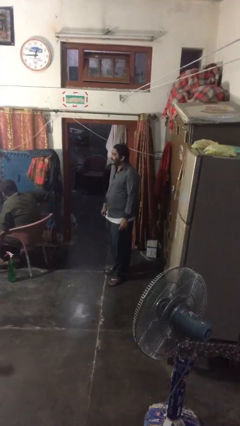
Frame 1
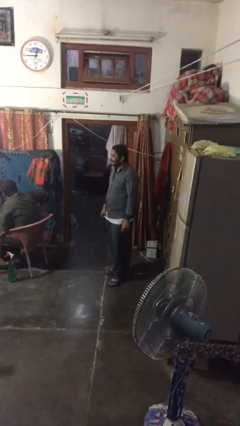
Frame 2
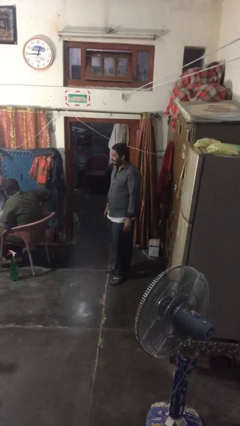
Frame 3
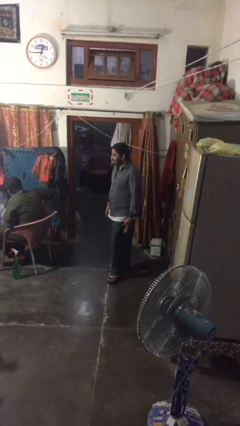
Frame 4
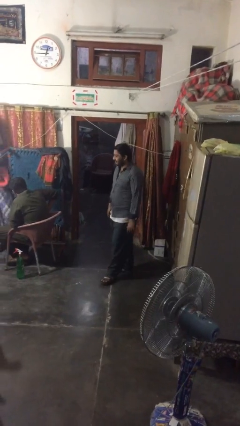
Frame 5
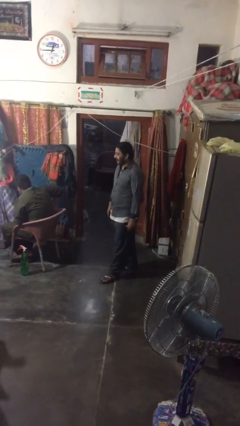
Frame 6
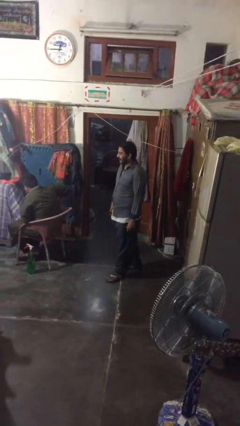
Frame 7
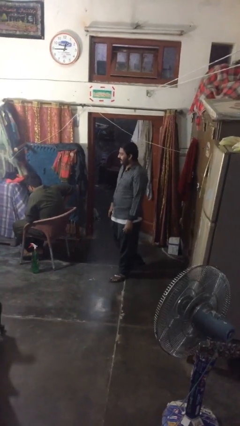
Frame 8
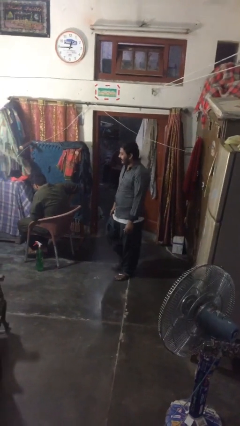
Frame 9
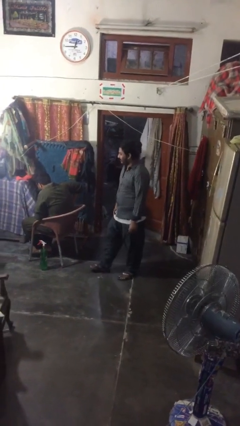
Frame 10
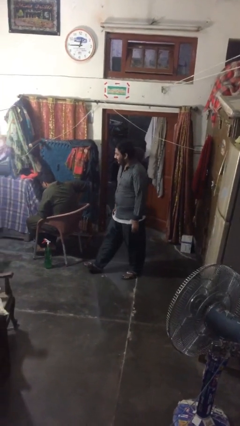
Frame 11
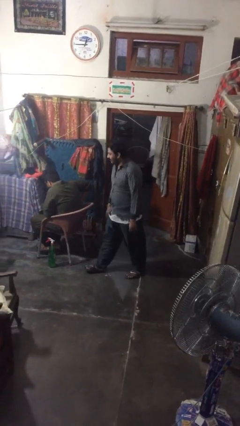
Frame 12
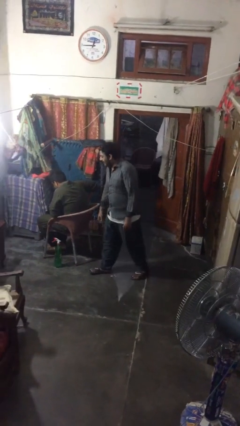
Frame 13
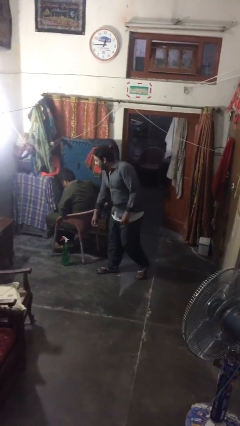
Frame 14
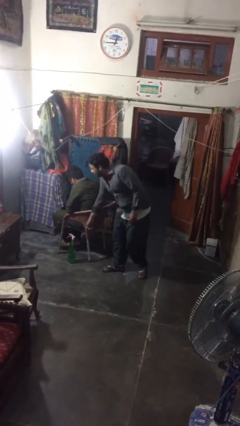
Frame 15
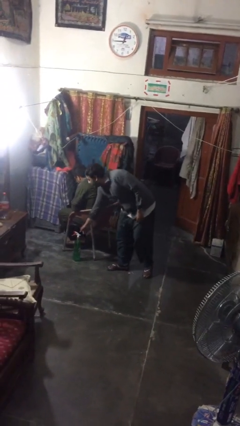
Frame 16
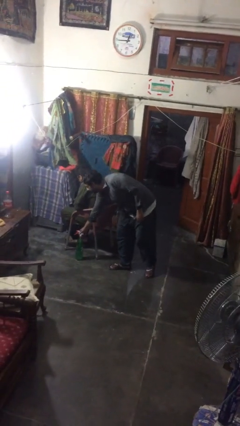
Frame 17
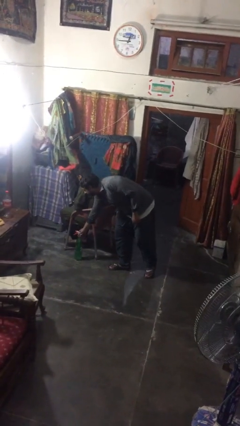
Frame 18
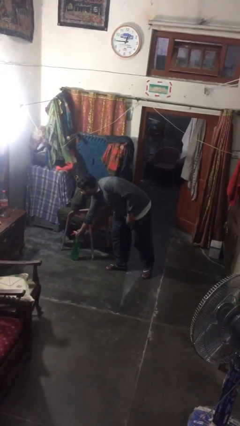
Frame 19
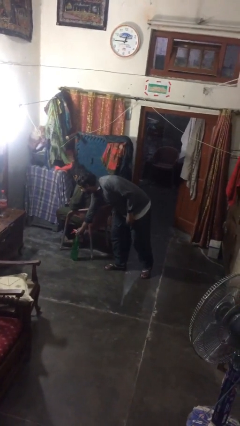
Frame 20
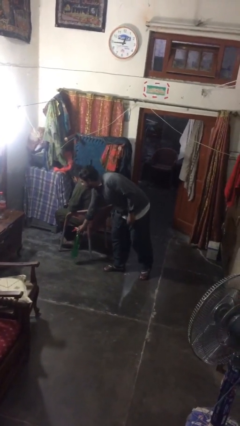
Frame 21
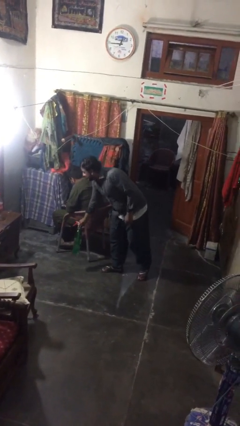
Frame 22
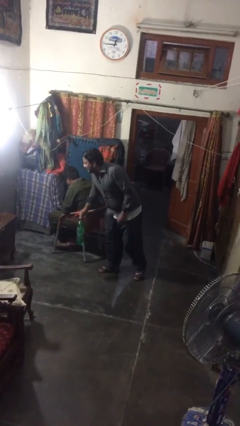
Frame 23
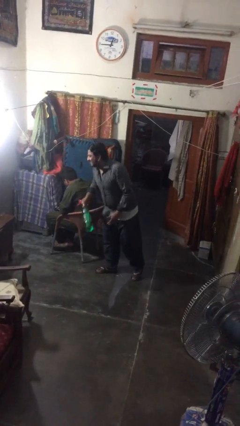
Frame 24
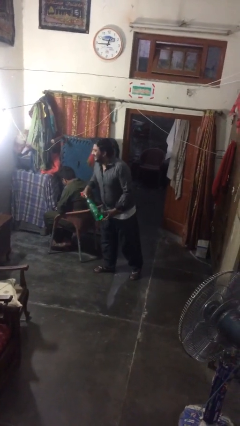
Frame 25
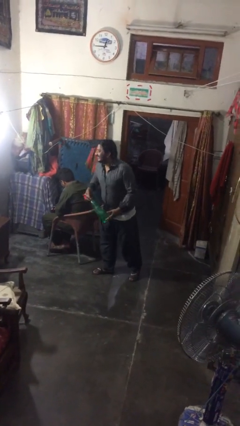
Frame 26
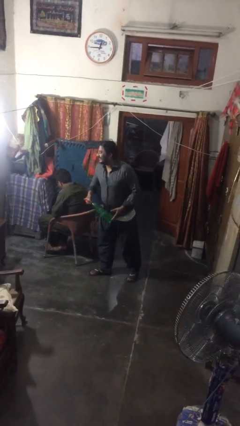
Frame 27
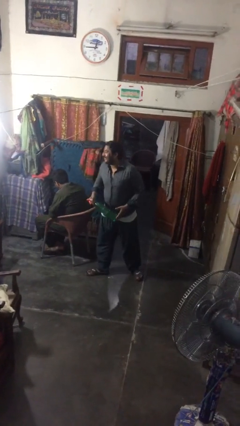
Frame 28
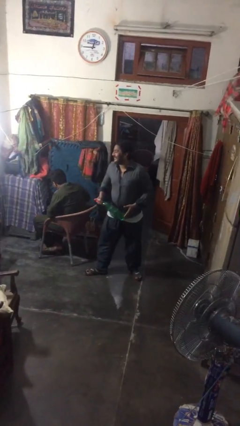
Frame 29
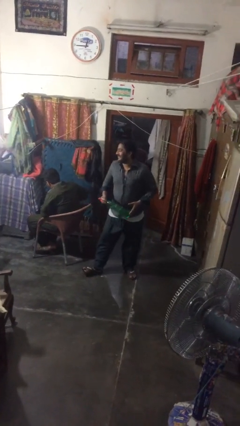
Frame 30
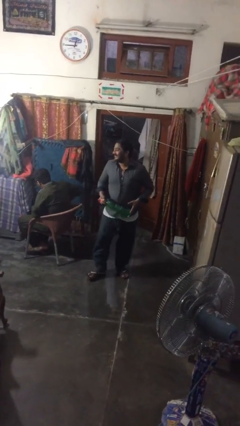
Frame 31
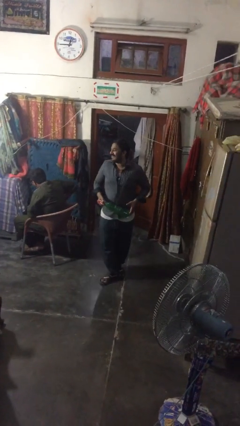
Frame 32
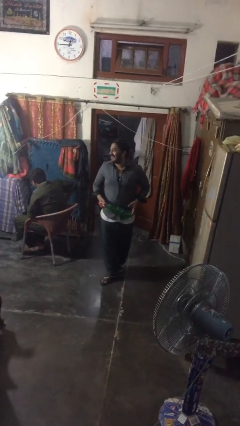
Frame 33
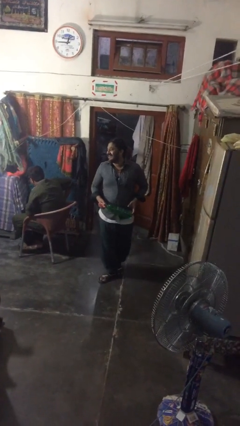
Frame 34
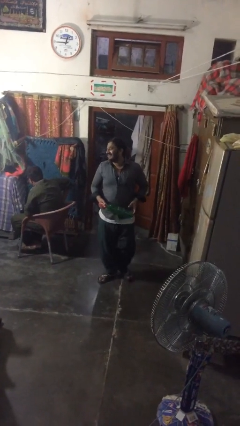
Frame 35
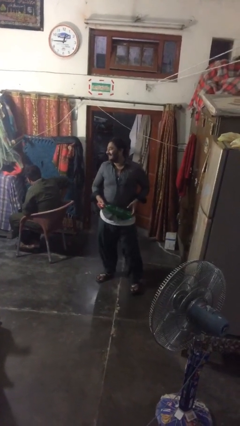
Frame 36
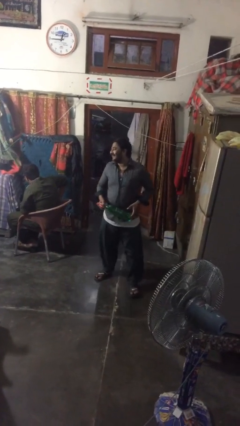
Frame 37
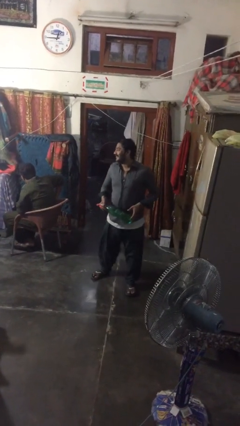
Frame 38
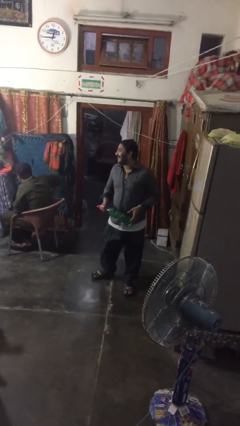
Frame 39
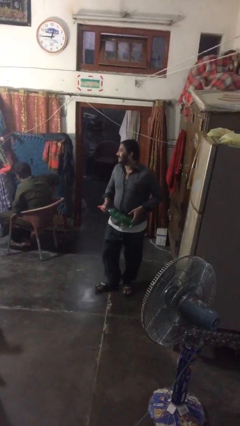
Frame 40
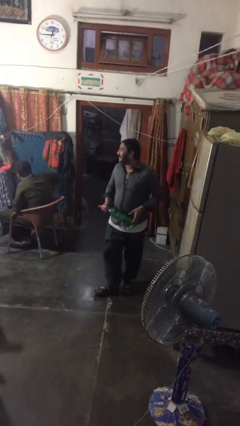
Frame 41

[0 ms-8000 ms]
person steals object from person

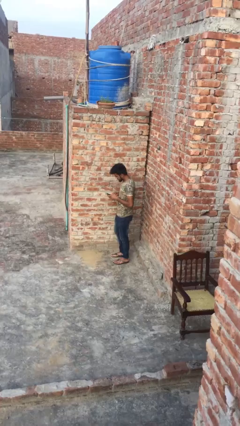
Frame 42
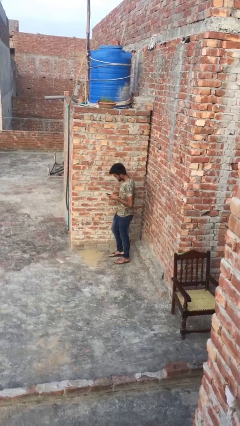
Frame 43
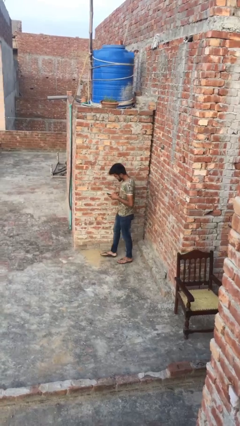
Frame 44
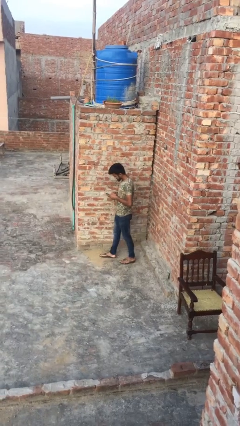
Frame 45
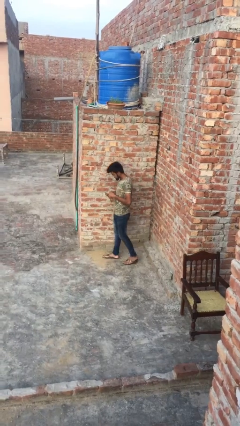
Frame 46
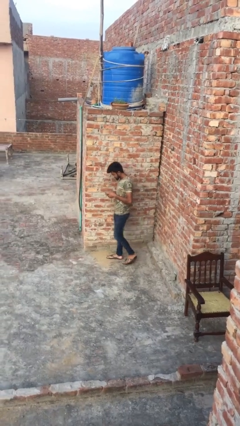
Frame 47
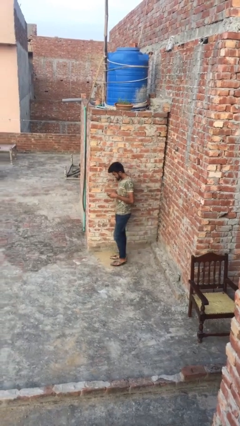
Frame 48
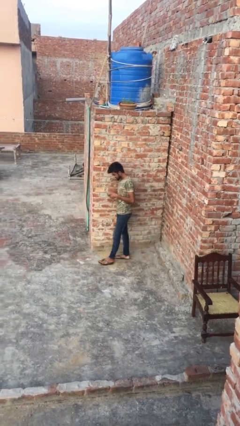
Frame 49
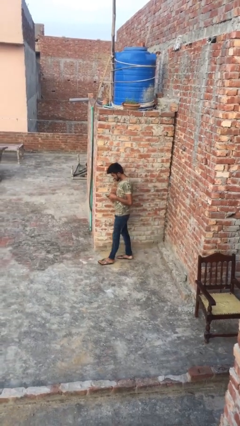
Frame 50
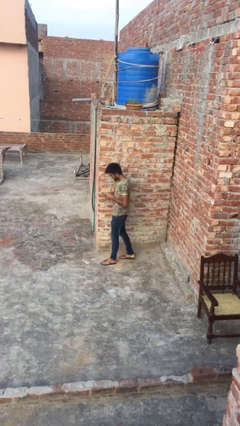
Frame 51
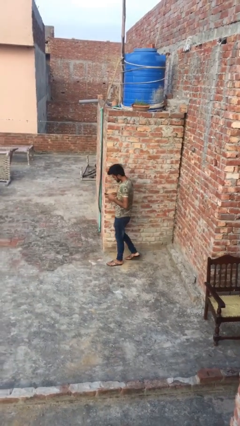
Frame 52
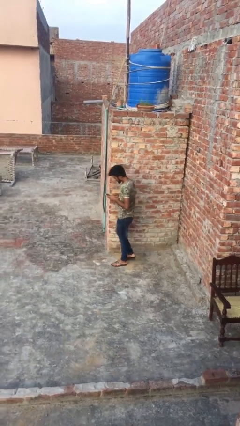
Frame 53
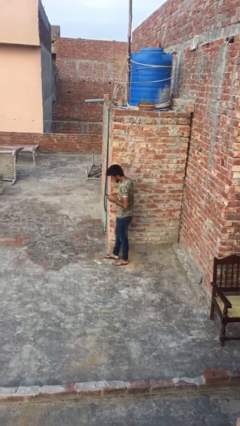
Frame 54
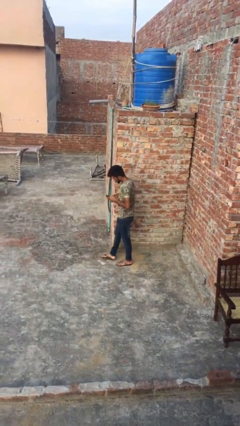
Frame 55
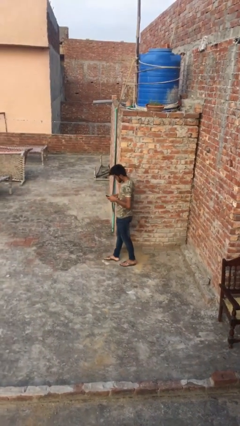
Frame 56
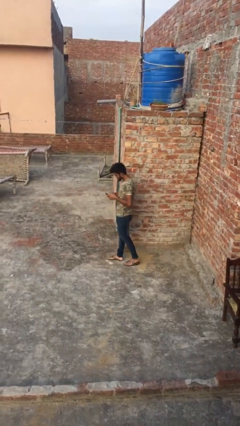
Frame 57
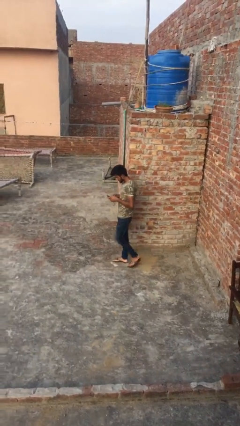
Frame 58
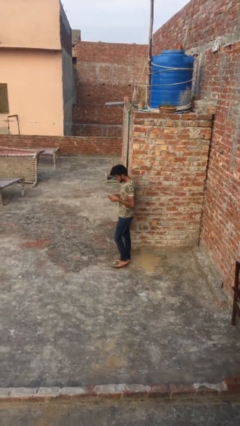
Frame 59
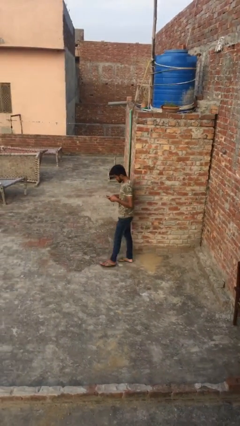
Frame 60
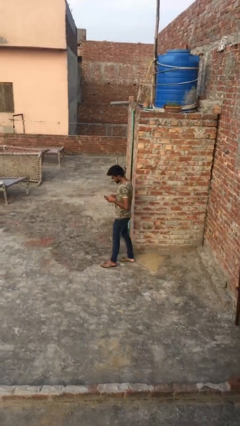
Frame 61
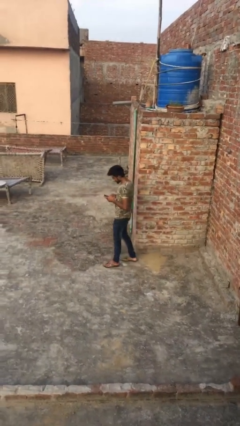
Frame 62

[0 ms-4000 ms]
person texts on phone

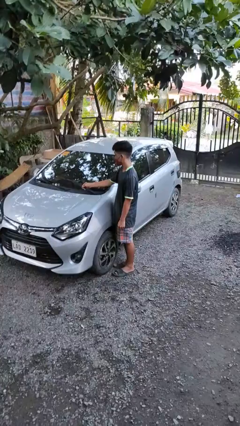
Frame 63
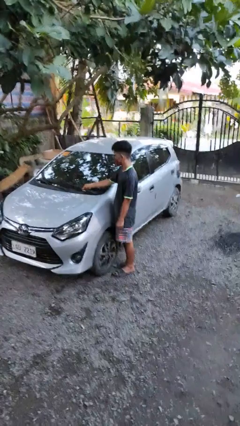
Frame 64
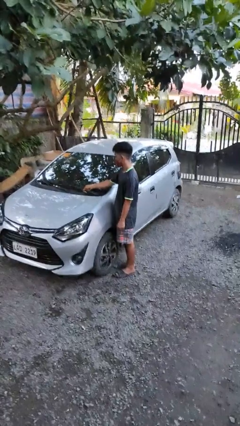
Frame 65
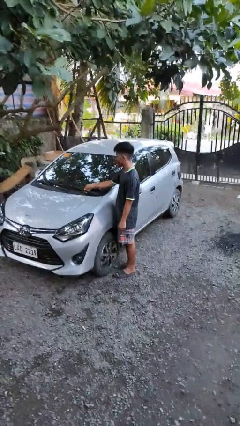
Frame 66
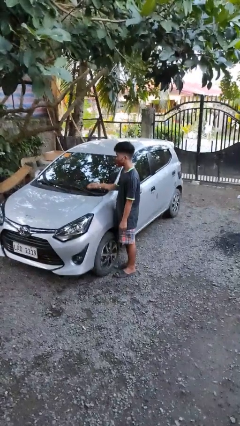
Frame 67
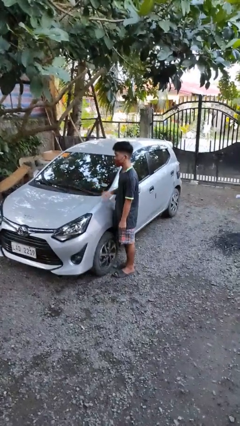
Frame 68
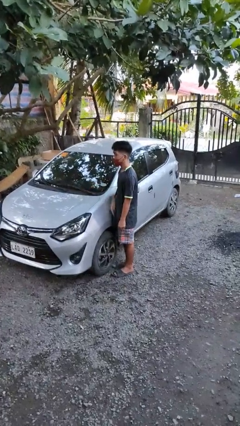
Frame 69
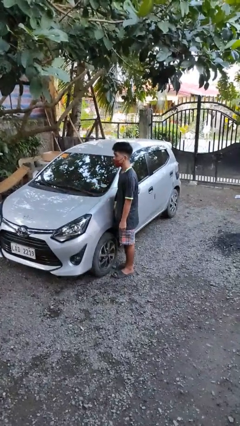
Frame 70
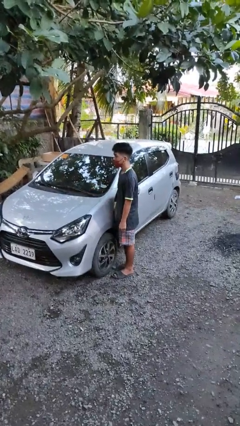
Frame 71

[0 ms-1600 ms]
person flips down car wipers

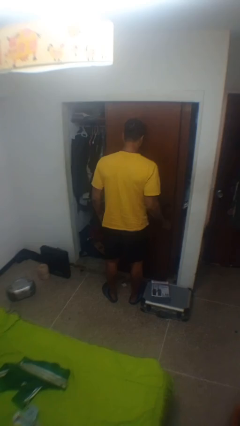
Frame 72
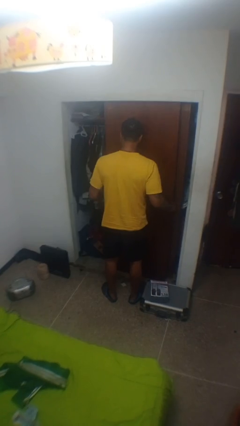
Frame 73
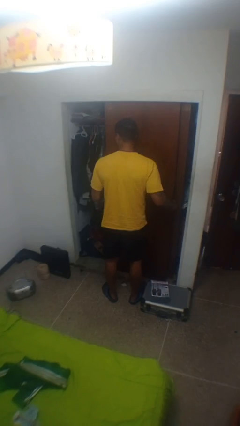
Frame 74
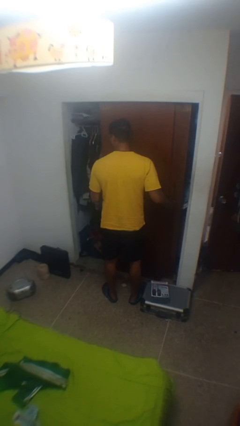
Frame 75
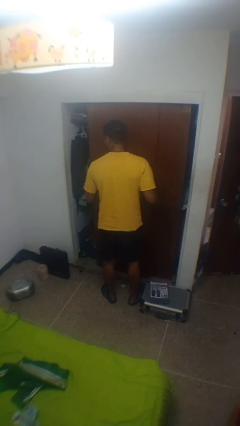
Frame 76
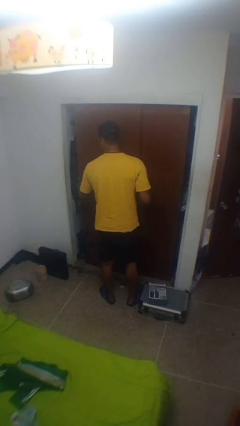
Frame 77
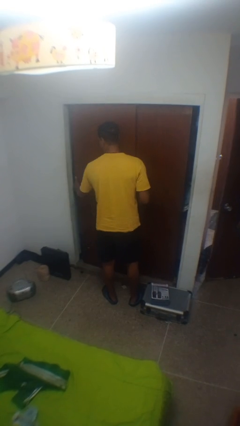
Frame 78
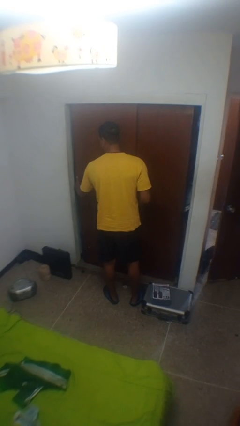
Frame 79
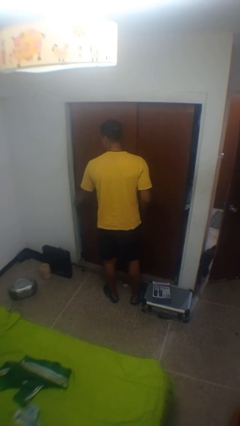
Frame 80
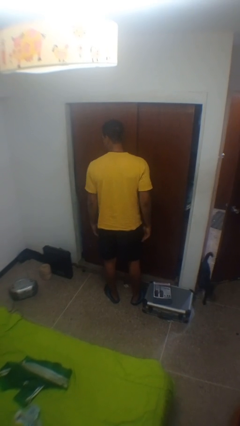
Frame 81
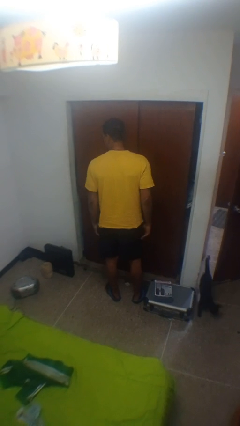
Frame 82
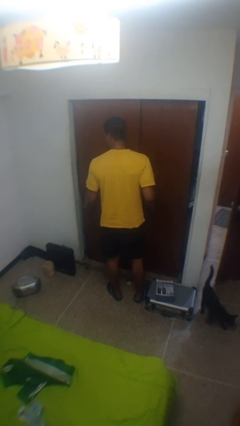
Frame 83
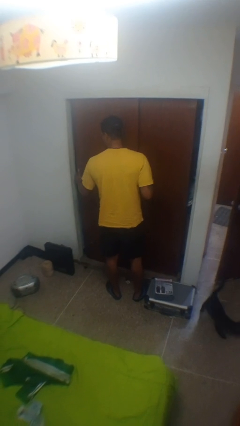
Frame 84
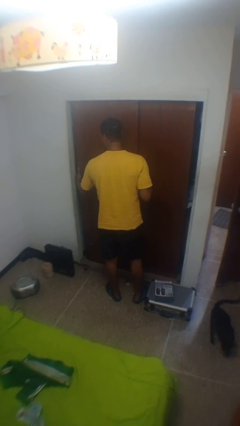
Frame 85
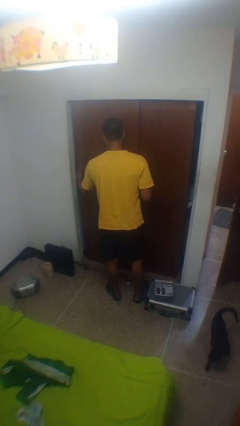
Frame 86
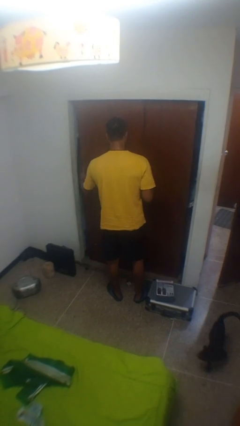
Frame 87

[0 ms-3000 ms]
person closes closet door

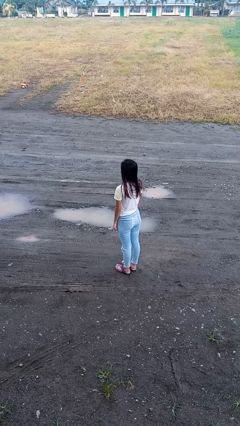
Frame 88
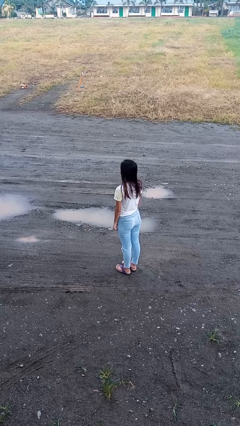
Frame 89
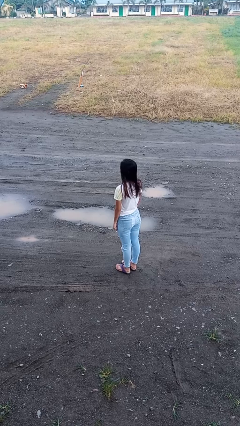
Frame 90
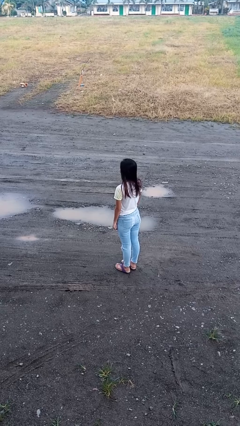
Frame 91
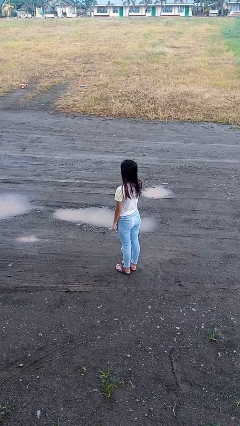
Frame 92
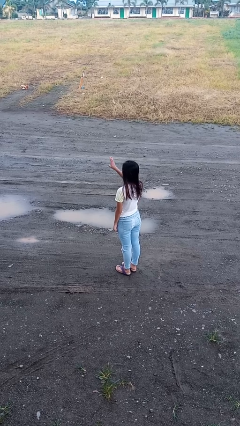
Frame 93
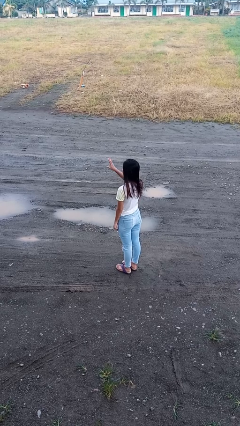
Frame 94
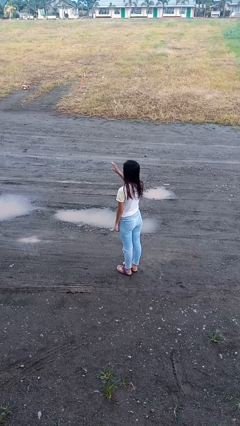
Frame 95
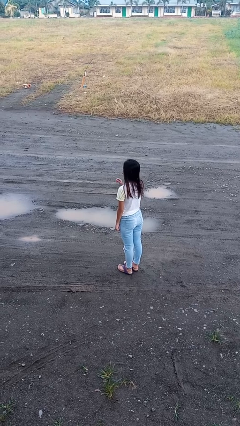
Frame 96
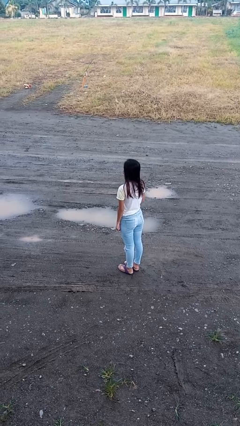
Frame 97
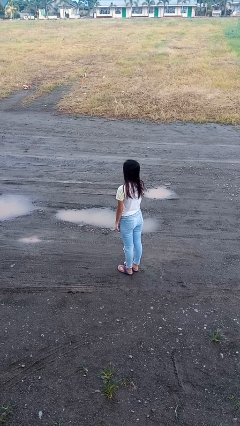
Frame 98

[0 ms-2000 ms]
person gestures swipe left
